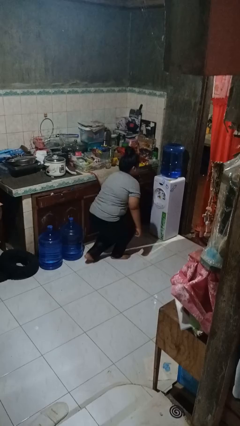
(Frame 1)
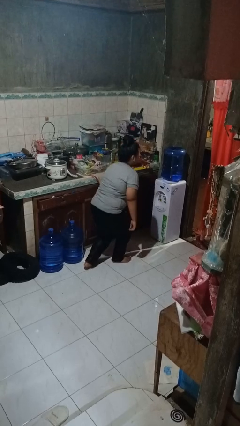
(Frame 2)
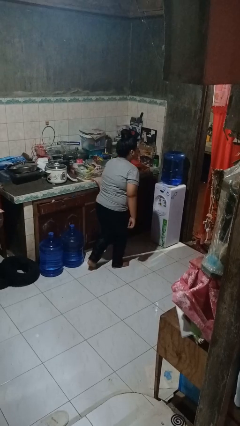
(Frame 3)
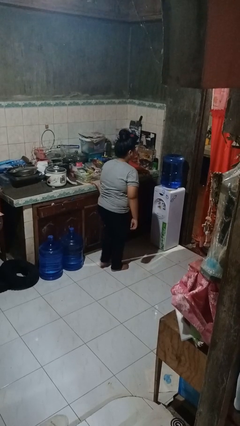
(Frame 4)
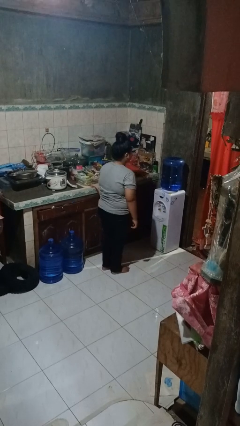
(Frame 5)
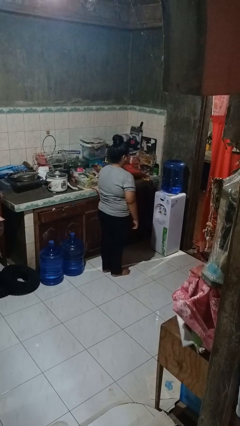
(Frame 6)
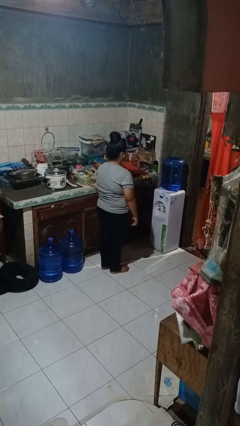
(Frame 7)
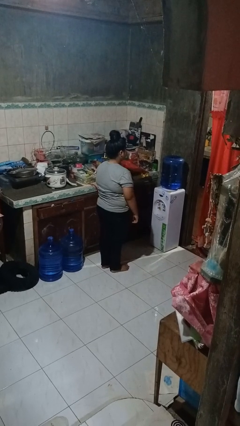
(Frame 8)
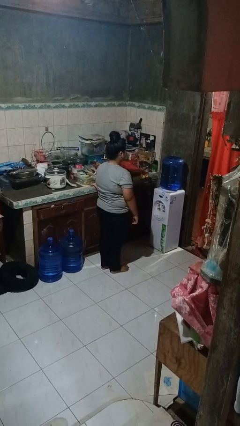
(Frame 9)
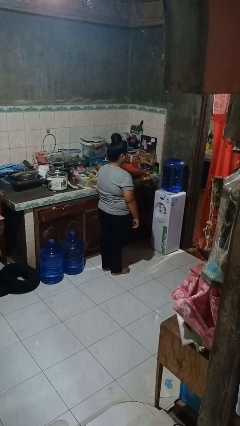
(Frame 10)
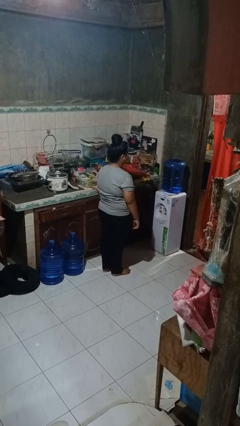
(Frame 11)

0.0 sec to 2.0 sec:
person stands up from floor

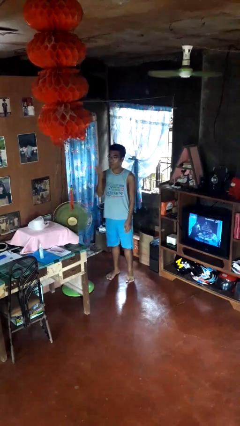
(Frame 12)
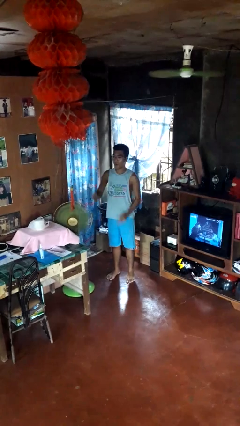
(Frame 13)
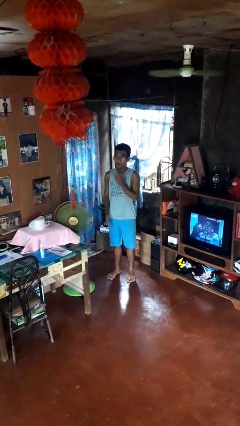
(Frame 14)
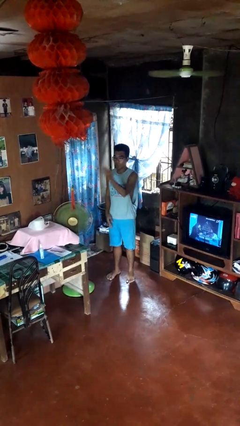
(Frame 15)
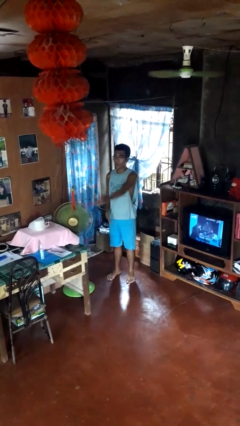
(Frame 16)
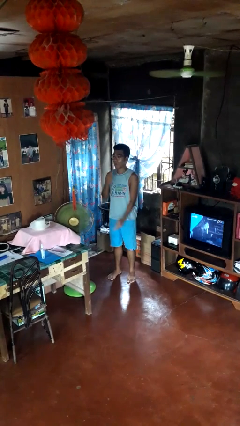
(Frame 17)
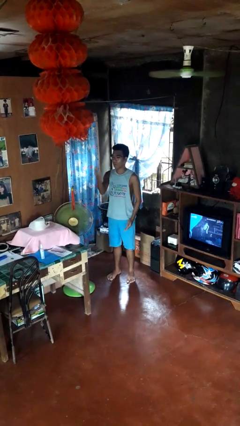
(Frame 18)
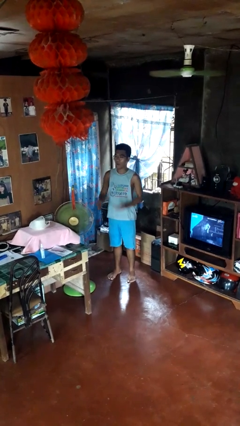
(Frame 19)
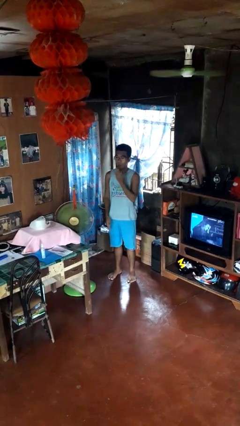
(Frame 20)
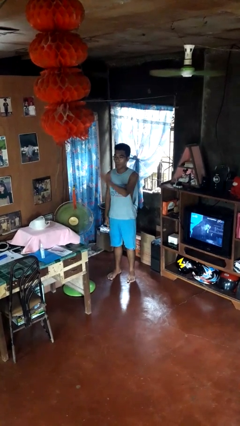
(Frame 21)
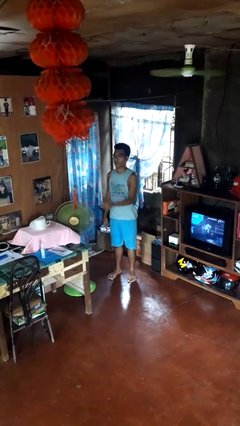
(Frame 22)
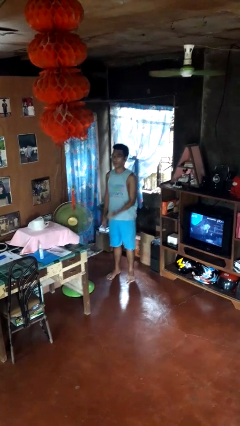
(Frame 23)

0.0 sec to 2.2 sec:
person gestures blow kiss

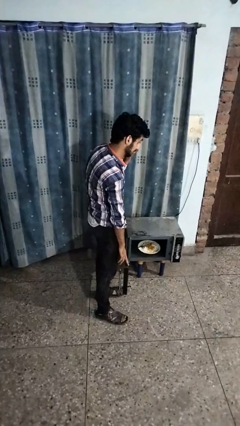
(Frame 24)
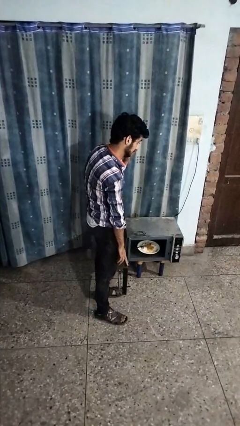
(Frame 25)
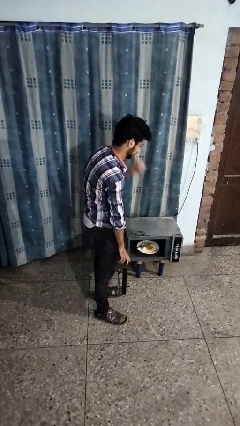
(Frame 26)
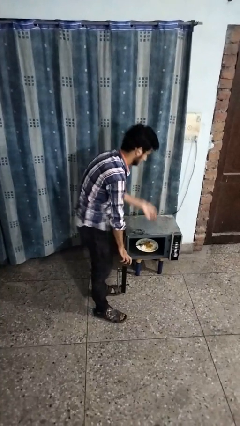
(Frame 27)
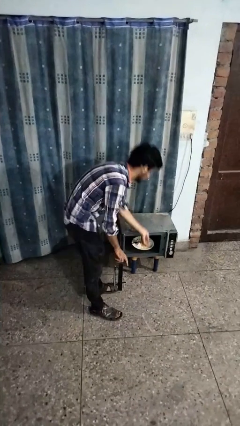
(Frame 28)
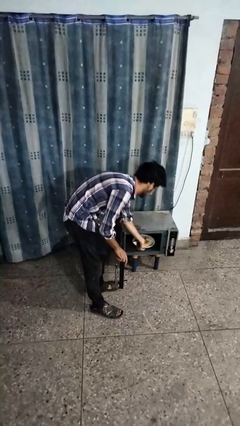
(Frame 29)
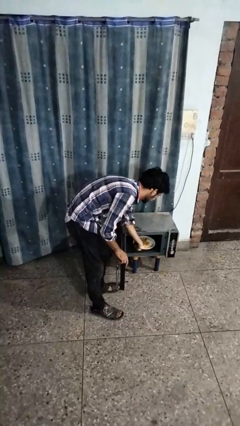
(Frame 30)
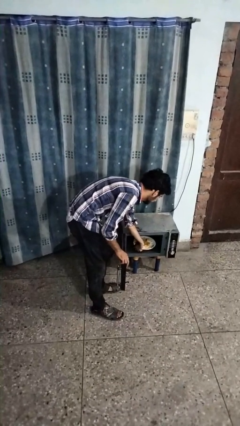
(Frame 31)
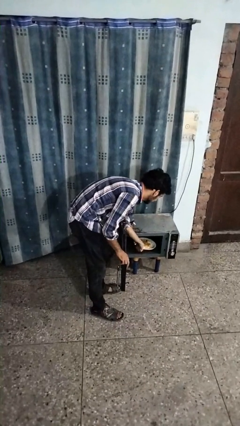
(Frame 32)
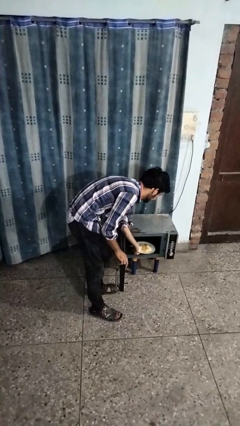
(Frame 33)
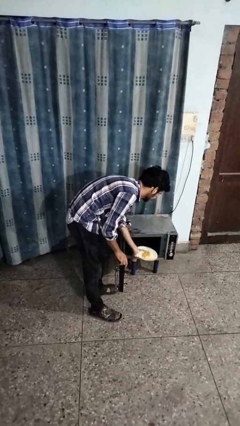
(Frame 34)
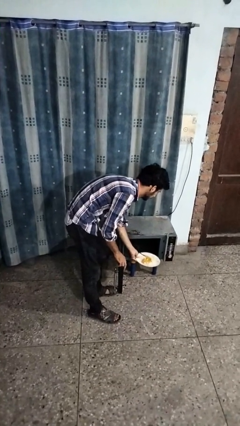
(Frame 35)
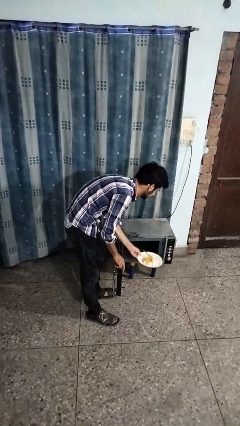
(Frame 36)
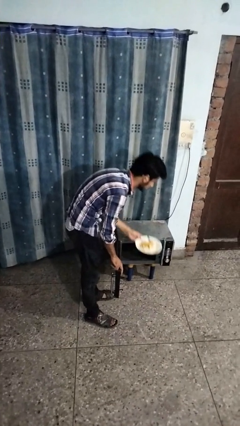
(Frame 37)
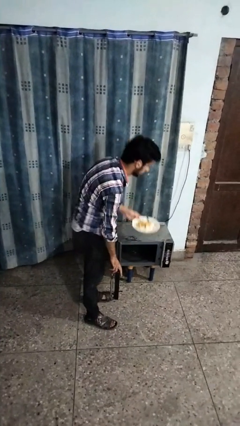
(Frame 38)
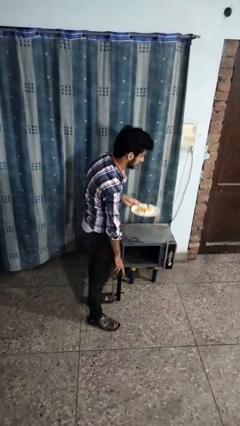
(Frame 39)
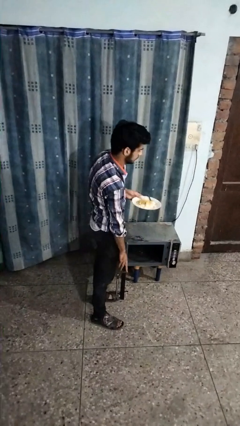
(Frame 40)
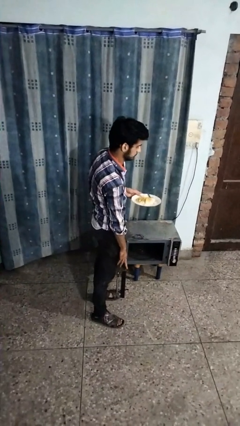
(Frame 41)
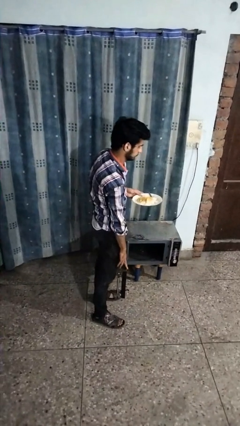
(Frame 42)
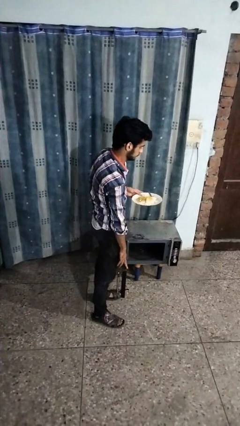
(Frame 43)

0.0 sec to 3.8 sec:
person takes object from oven

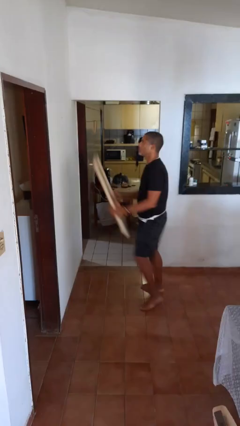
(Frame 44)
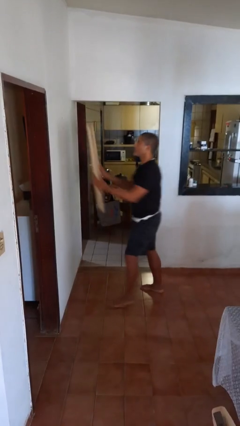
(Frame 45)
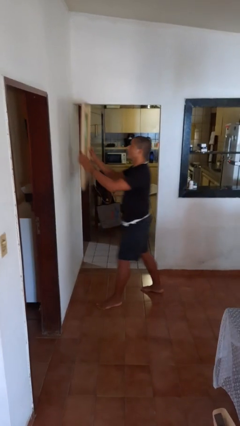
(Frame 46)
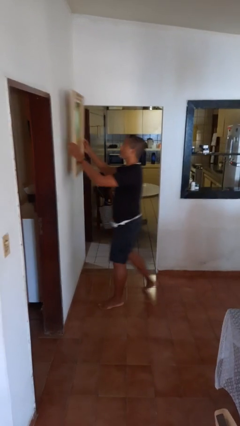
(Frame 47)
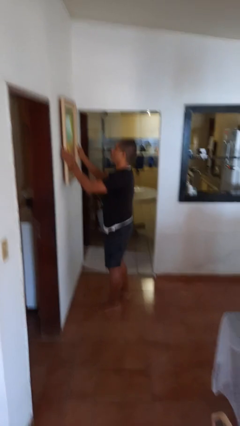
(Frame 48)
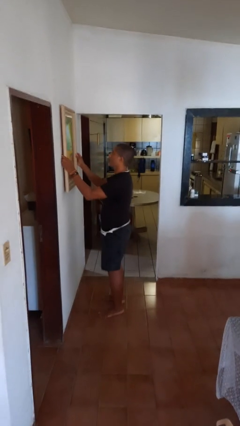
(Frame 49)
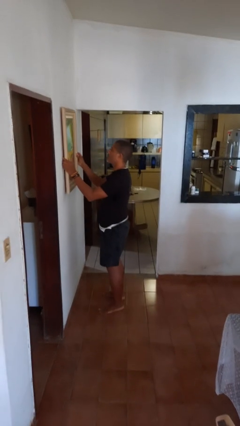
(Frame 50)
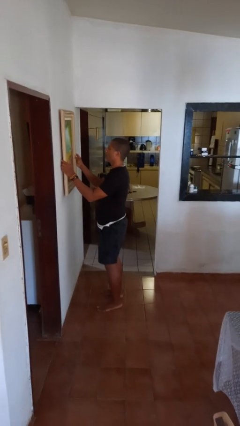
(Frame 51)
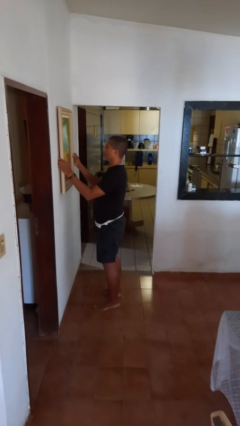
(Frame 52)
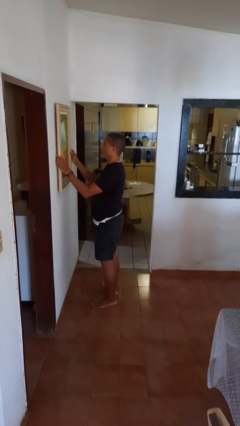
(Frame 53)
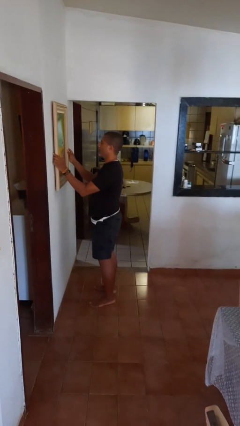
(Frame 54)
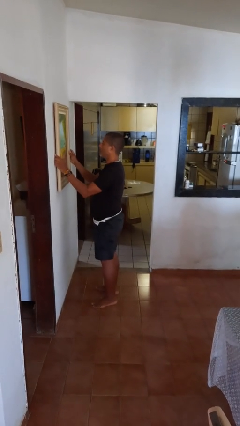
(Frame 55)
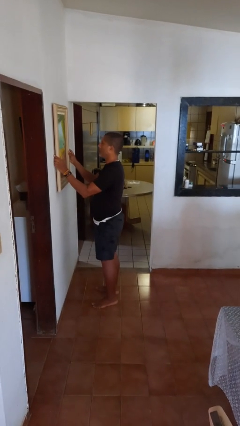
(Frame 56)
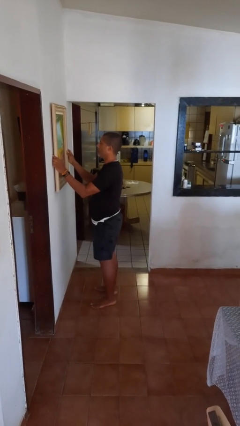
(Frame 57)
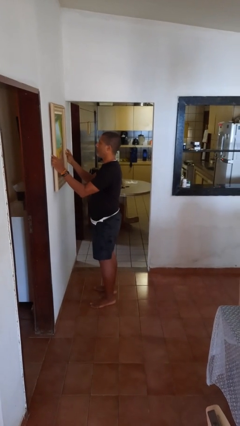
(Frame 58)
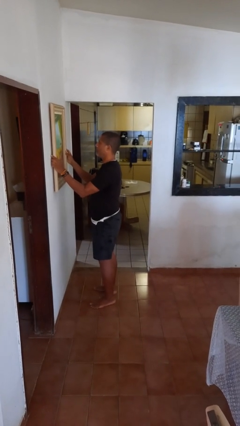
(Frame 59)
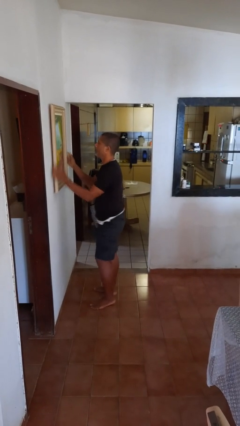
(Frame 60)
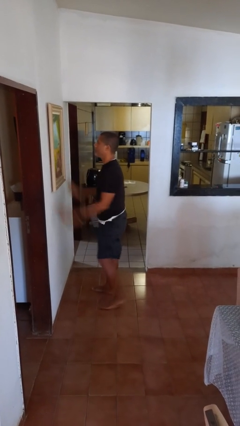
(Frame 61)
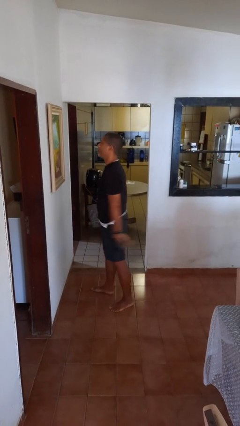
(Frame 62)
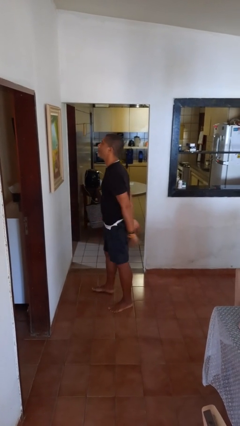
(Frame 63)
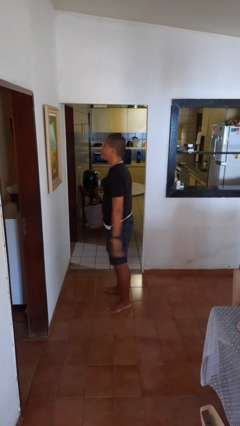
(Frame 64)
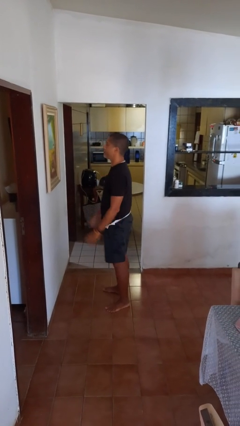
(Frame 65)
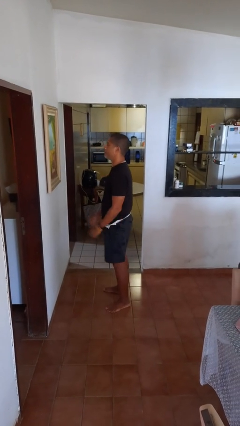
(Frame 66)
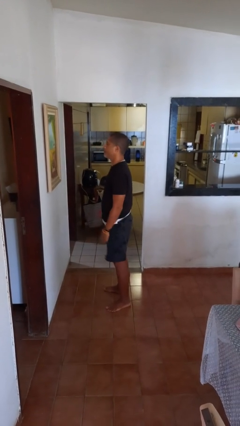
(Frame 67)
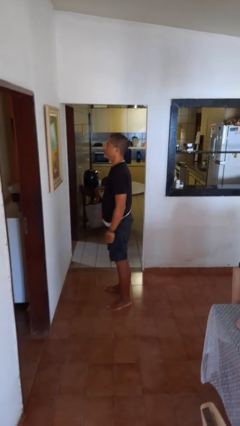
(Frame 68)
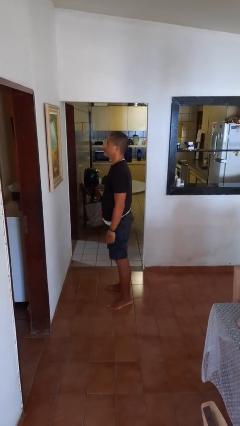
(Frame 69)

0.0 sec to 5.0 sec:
person puts up picture frame

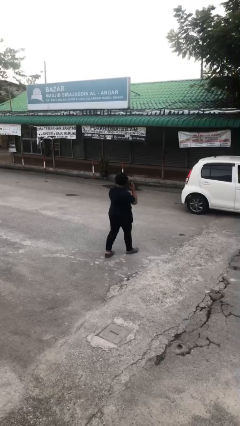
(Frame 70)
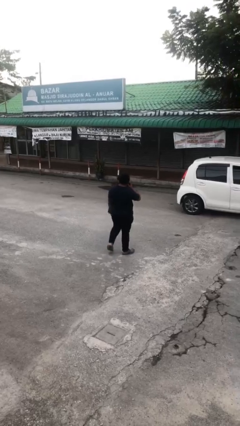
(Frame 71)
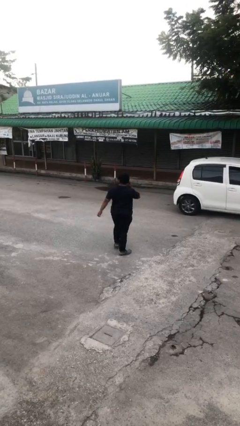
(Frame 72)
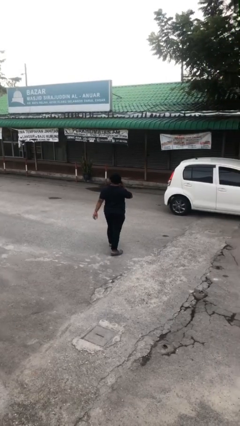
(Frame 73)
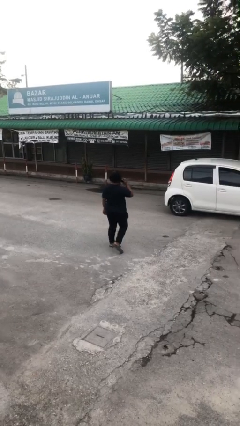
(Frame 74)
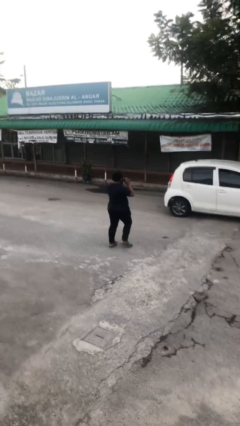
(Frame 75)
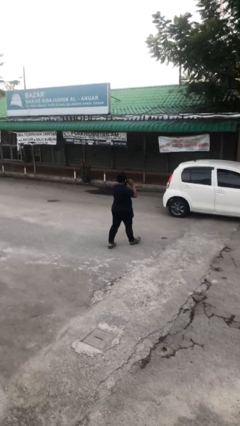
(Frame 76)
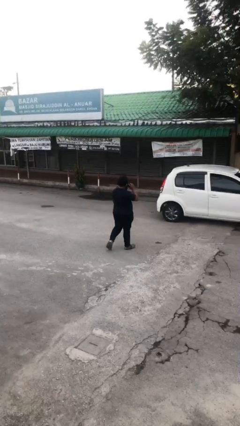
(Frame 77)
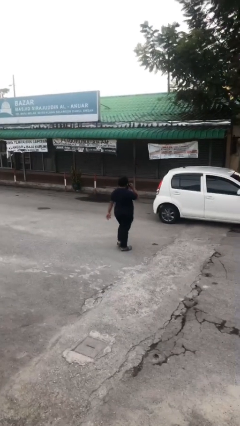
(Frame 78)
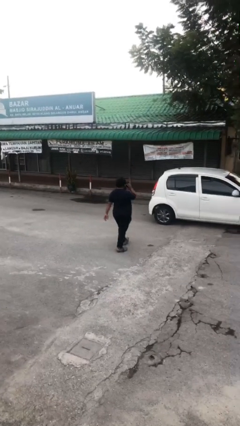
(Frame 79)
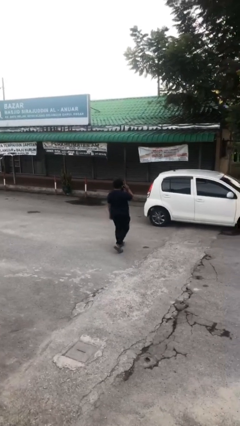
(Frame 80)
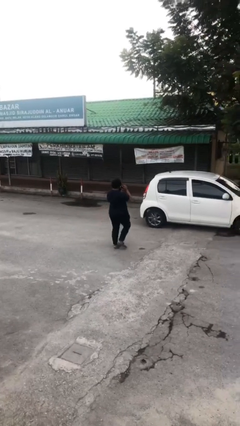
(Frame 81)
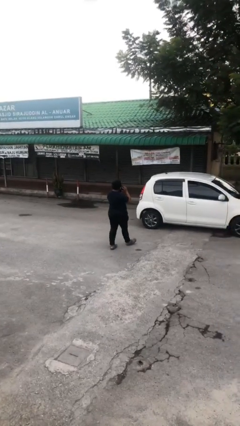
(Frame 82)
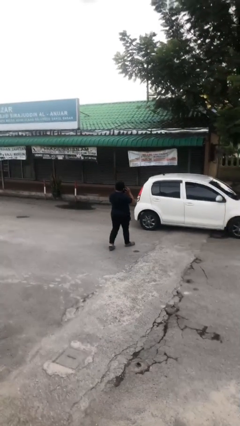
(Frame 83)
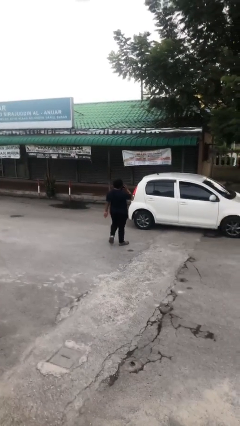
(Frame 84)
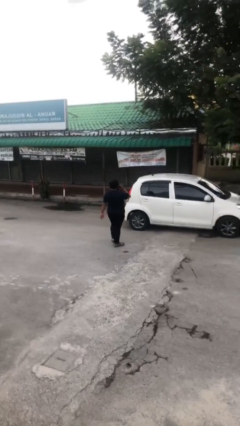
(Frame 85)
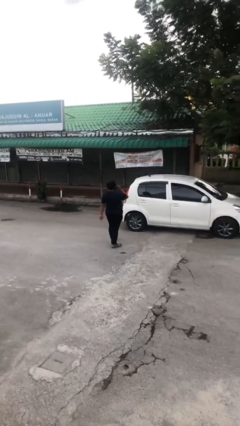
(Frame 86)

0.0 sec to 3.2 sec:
person talks on phone

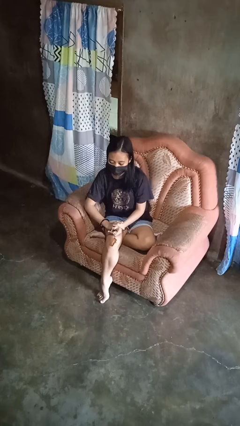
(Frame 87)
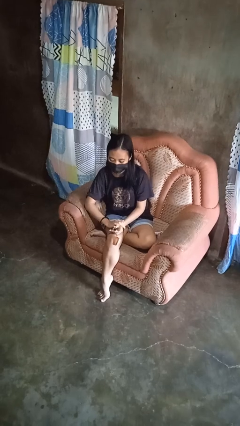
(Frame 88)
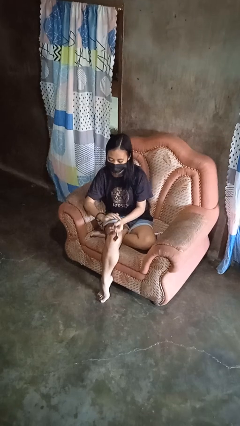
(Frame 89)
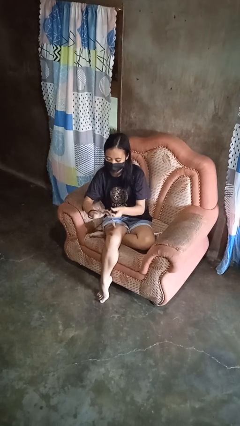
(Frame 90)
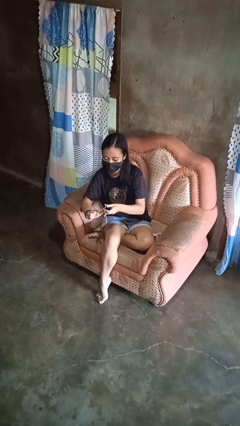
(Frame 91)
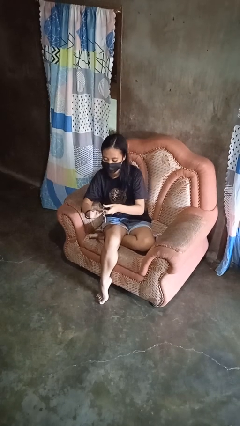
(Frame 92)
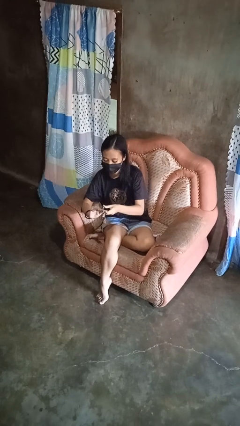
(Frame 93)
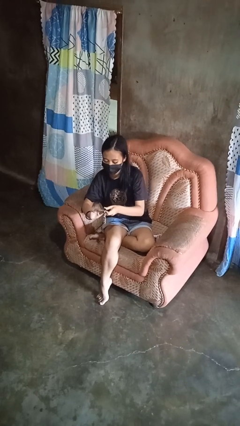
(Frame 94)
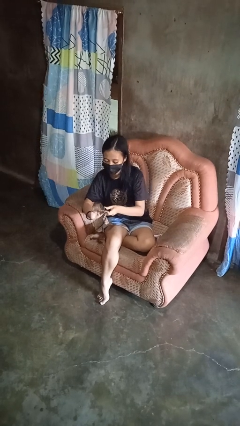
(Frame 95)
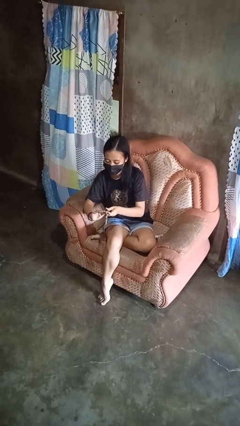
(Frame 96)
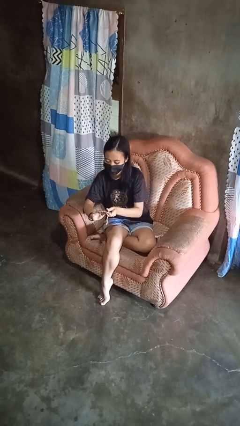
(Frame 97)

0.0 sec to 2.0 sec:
person clips fingernails
